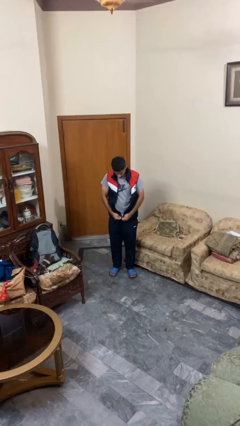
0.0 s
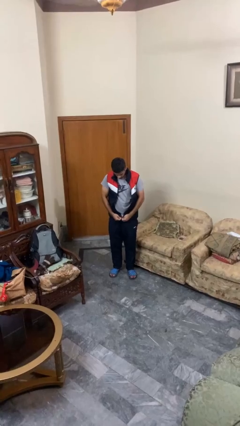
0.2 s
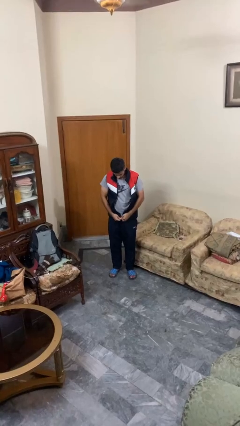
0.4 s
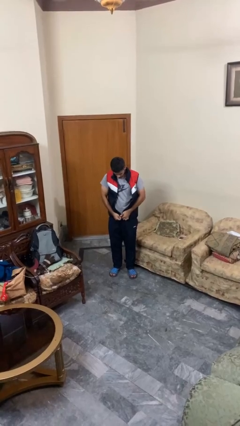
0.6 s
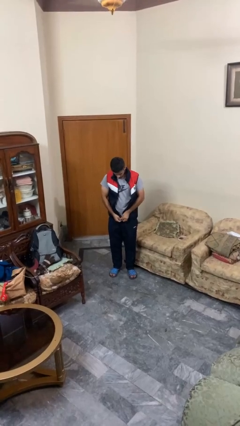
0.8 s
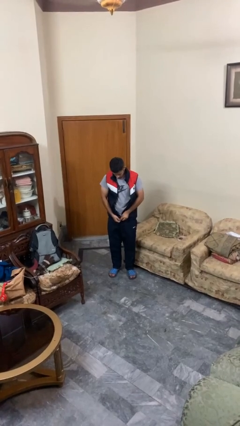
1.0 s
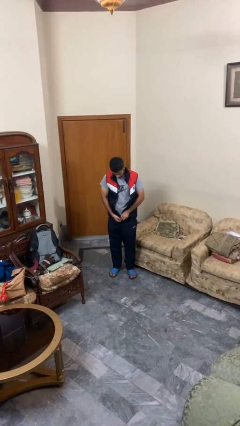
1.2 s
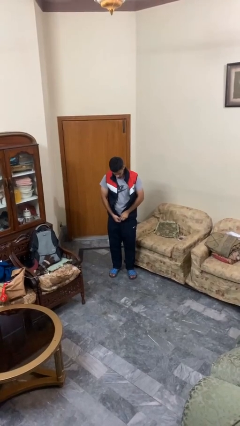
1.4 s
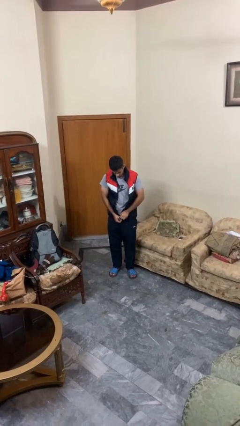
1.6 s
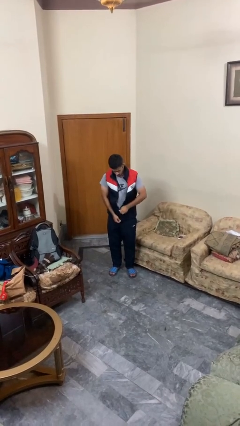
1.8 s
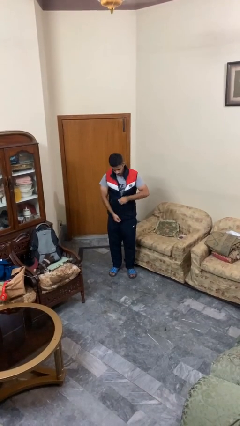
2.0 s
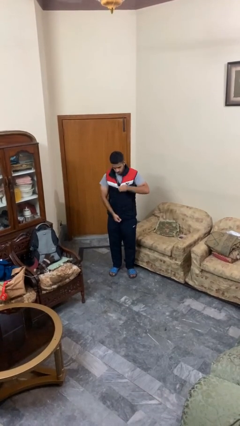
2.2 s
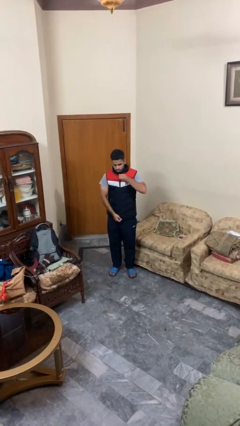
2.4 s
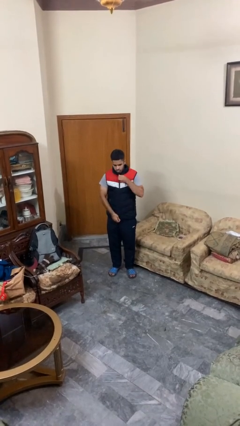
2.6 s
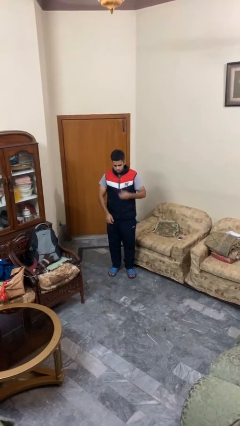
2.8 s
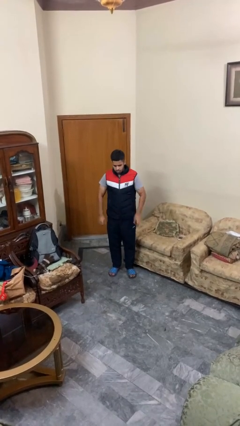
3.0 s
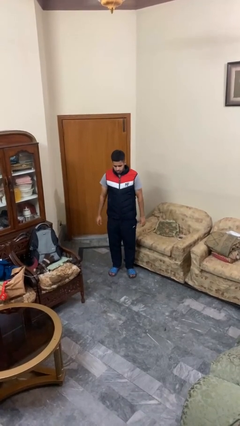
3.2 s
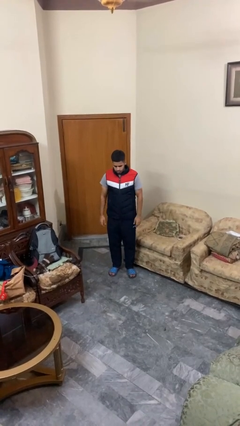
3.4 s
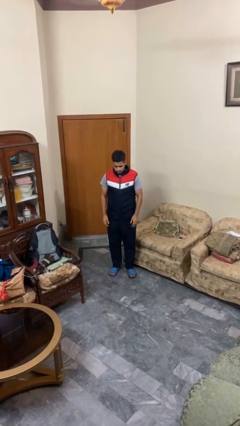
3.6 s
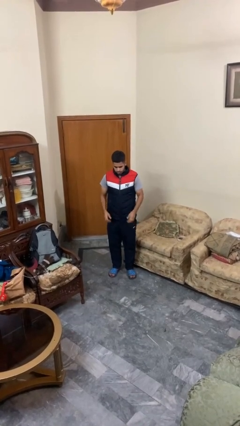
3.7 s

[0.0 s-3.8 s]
person zips up jacket

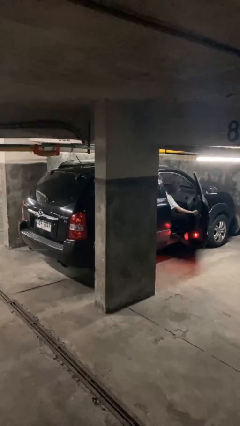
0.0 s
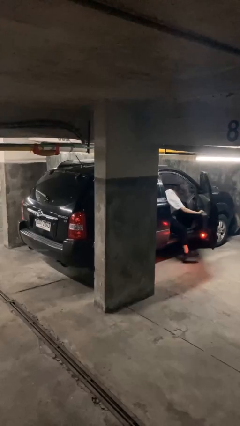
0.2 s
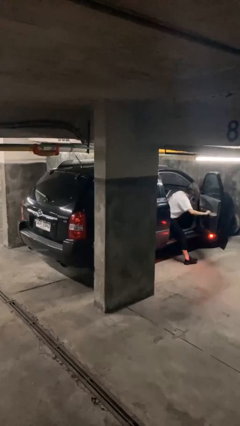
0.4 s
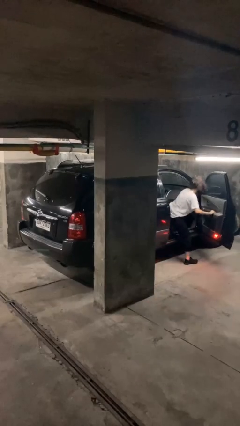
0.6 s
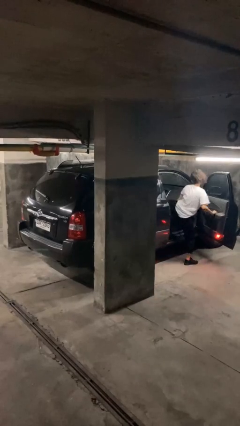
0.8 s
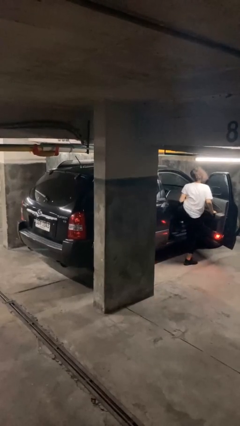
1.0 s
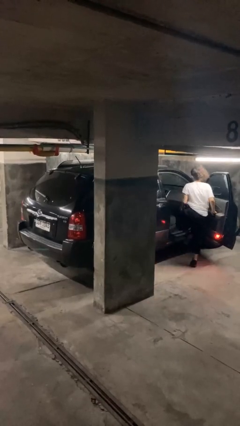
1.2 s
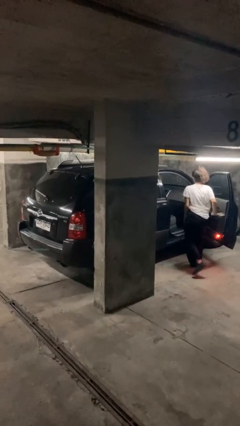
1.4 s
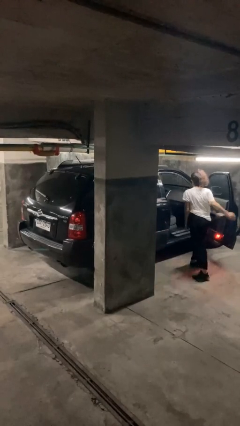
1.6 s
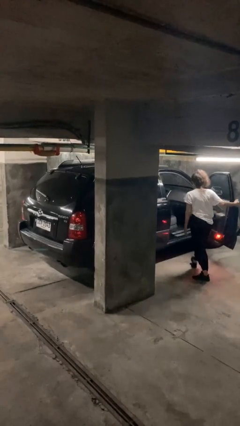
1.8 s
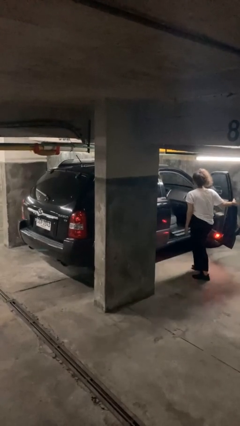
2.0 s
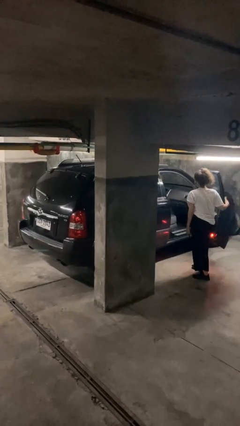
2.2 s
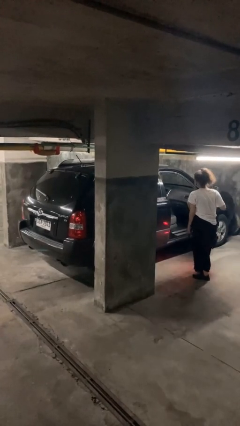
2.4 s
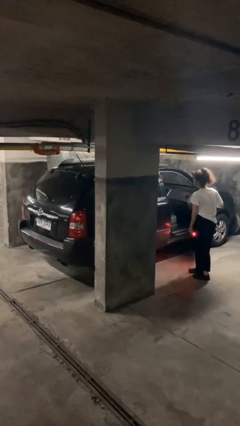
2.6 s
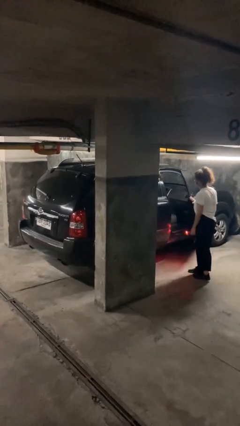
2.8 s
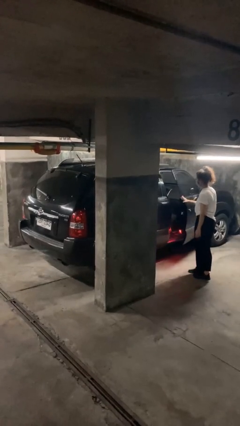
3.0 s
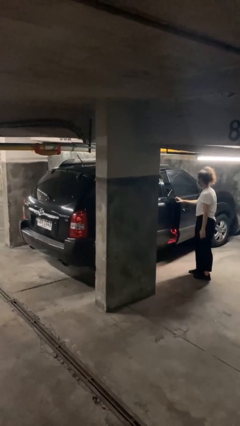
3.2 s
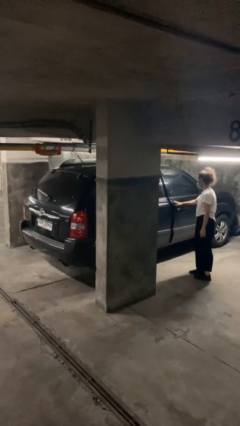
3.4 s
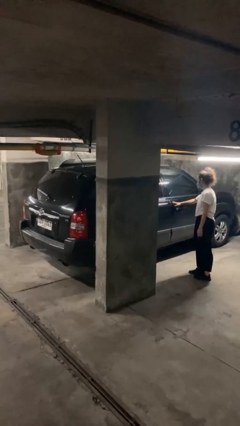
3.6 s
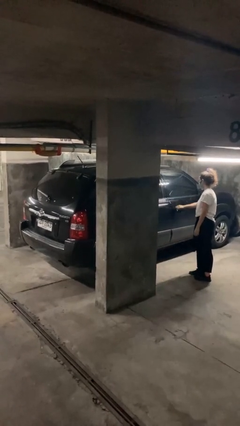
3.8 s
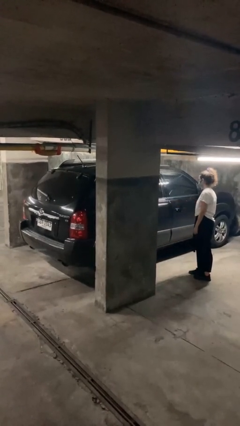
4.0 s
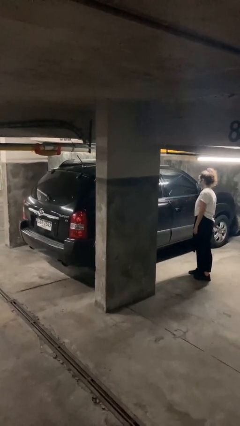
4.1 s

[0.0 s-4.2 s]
car drops off person

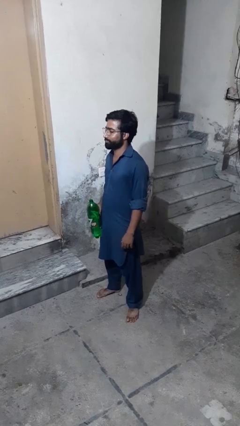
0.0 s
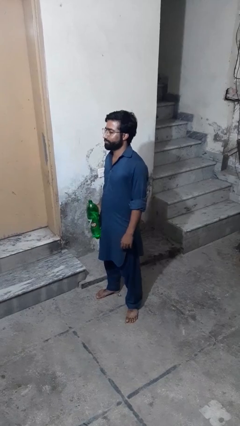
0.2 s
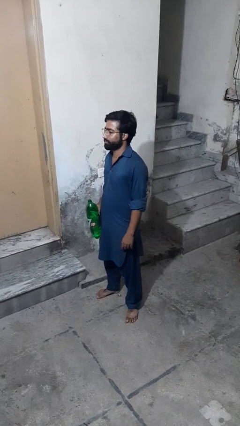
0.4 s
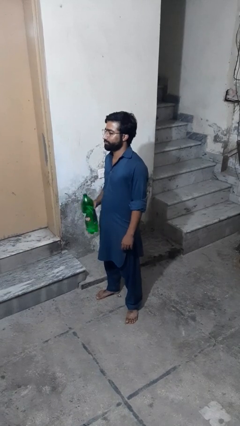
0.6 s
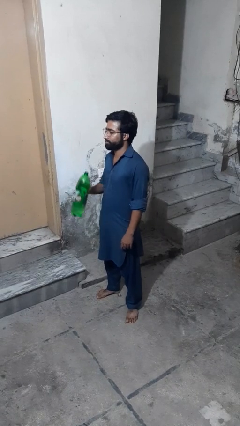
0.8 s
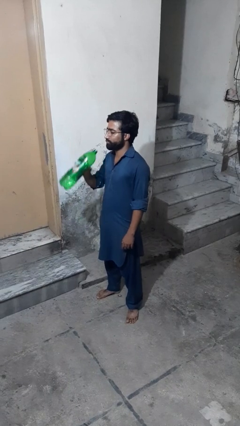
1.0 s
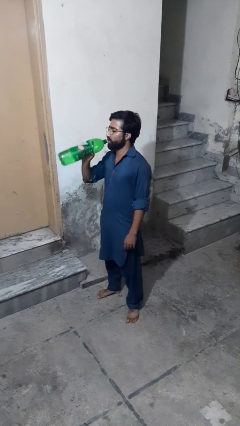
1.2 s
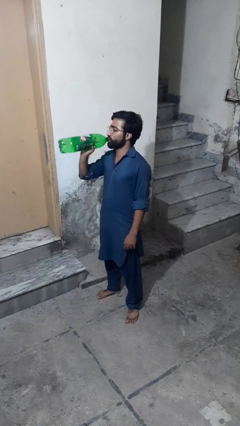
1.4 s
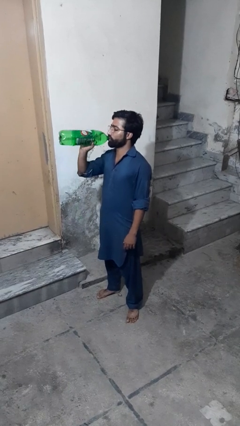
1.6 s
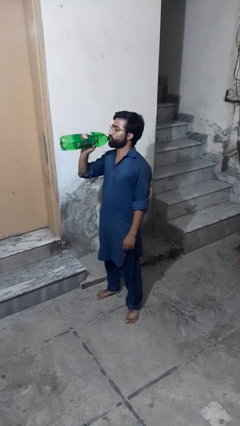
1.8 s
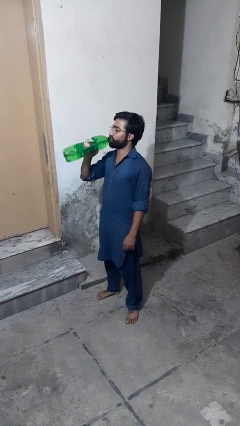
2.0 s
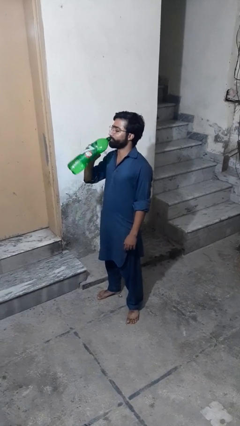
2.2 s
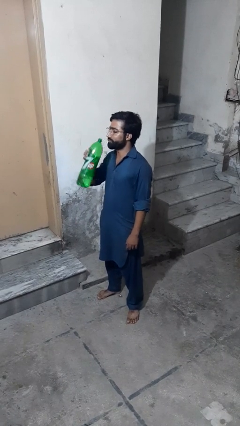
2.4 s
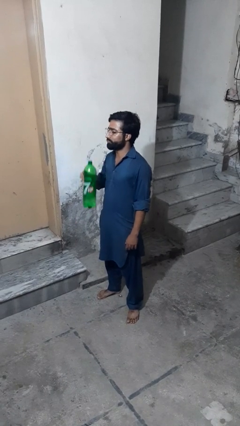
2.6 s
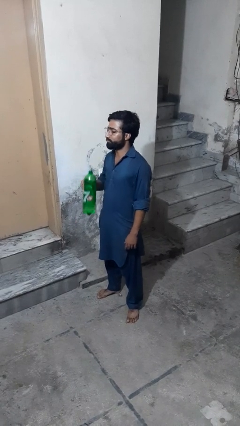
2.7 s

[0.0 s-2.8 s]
person drinks from bottle

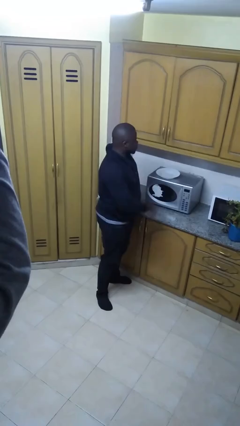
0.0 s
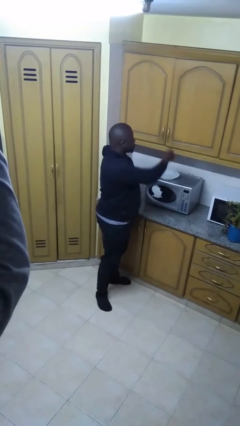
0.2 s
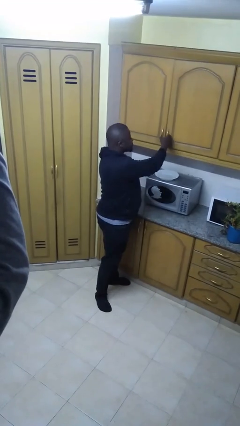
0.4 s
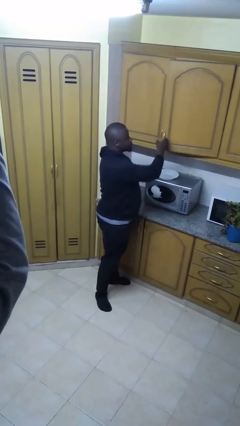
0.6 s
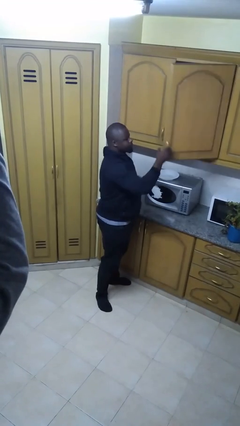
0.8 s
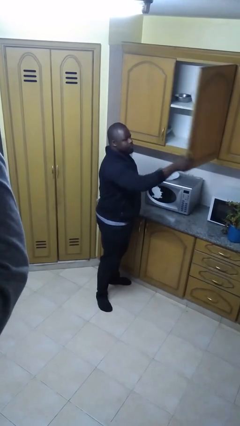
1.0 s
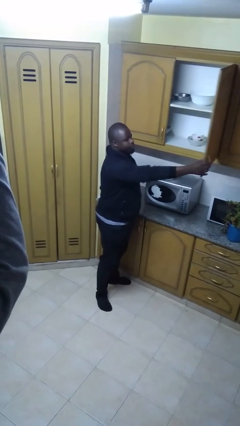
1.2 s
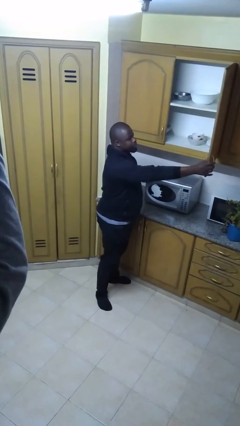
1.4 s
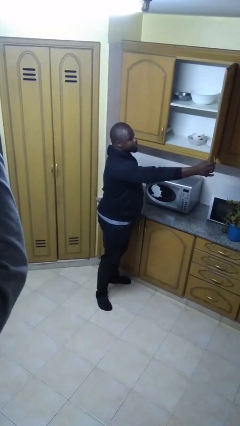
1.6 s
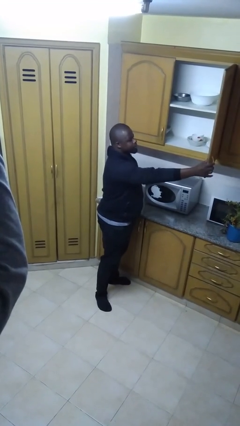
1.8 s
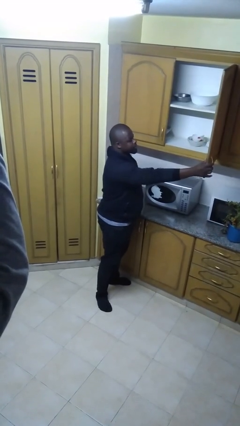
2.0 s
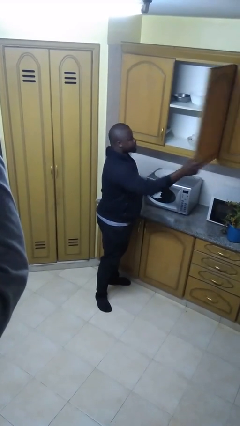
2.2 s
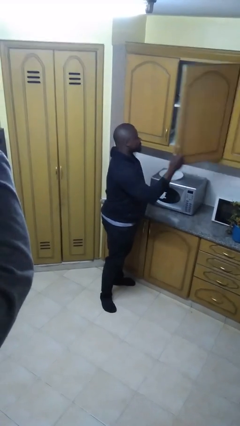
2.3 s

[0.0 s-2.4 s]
person opens cabinet

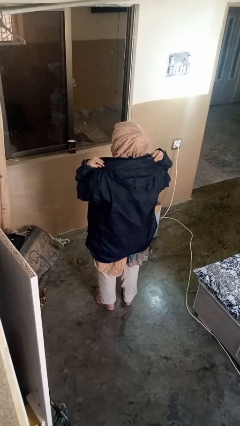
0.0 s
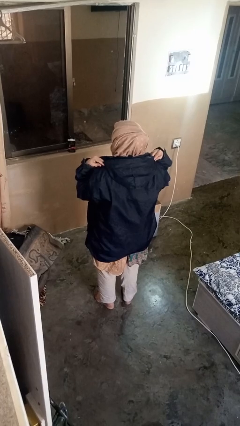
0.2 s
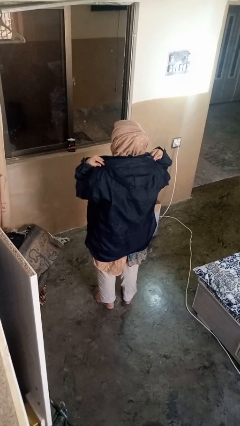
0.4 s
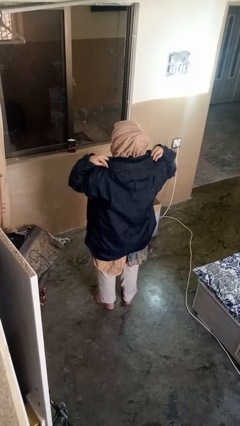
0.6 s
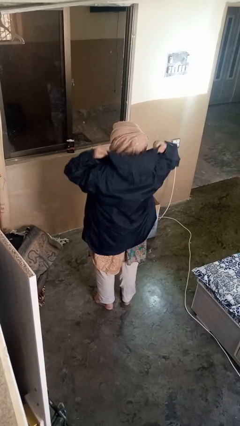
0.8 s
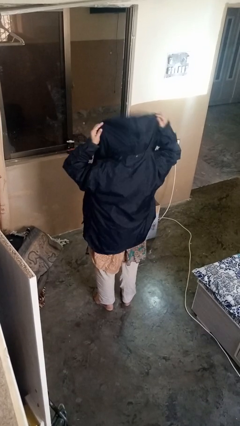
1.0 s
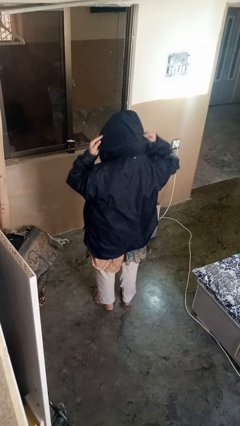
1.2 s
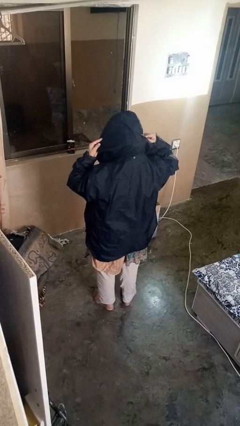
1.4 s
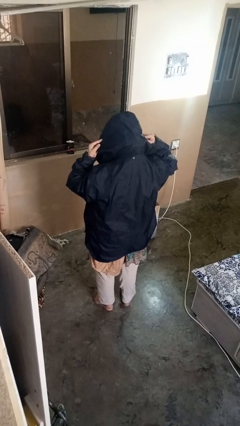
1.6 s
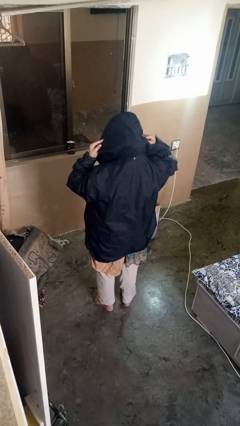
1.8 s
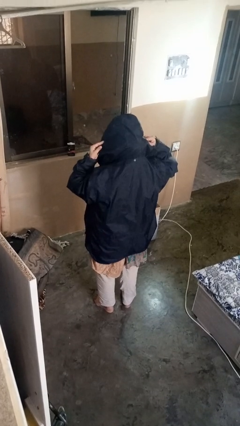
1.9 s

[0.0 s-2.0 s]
person puts on hat

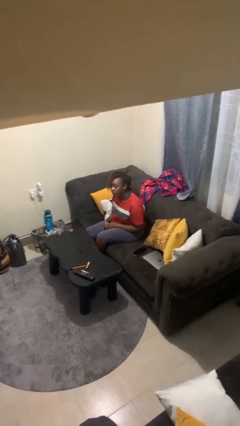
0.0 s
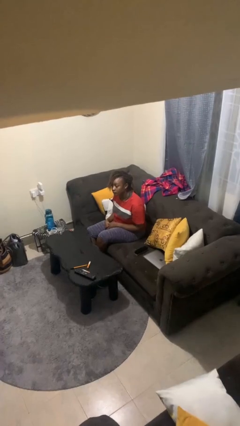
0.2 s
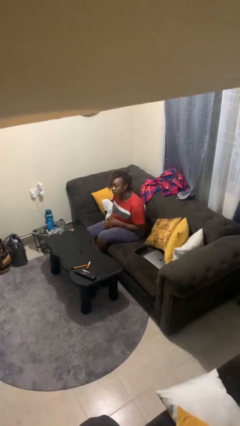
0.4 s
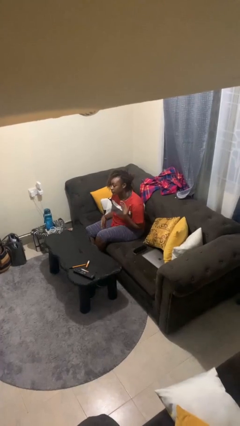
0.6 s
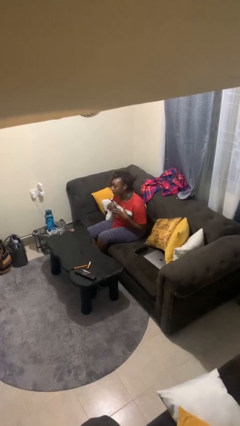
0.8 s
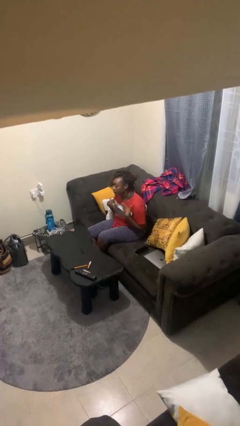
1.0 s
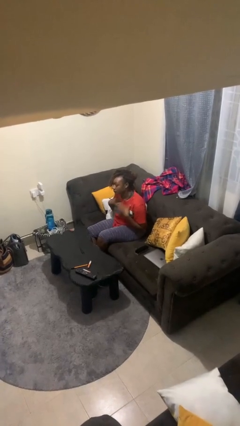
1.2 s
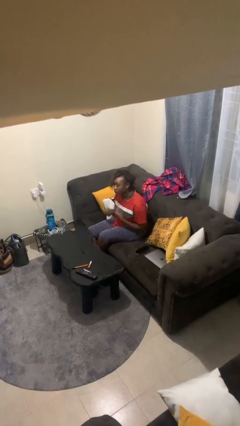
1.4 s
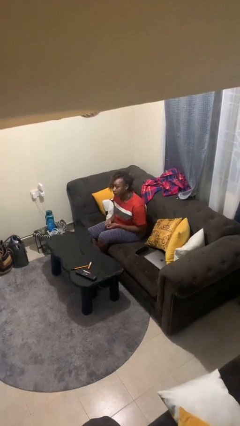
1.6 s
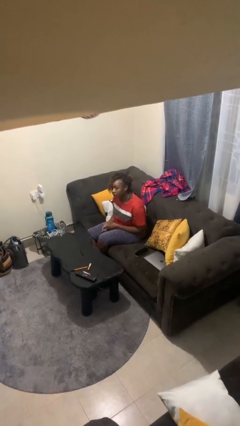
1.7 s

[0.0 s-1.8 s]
person drums on chest

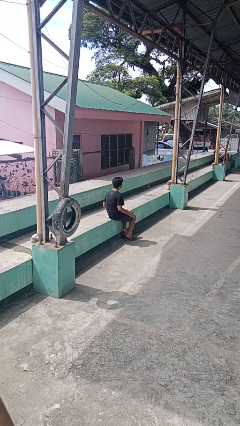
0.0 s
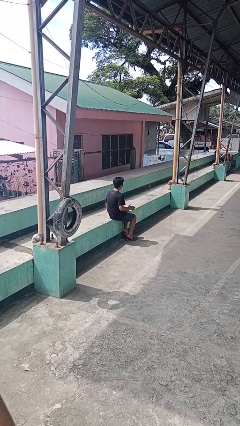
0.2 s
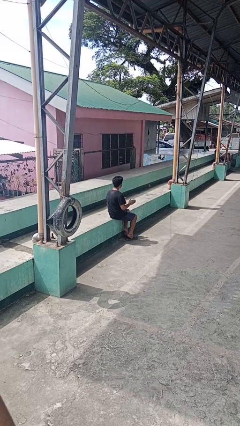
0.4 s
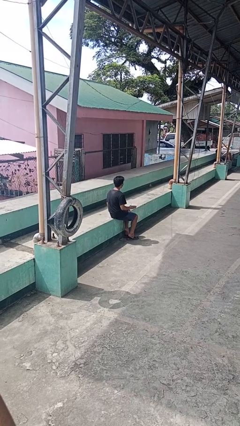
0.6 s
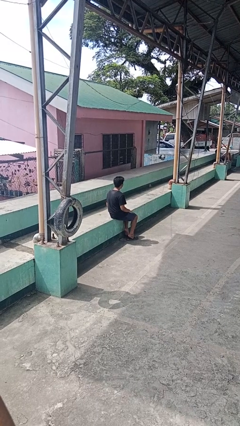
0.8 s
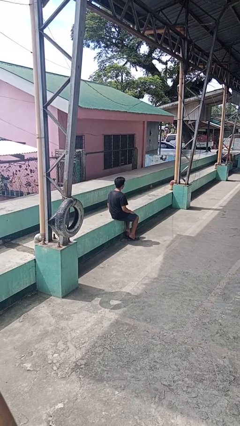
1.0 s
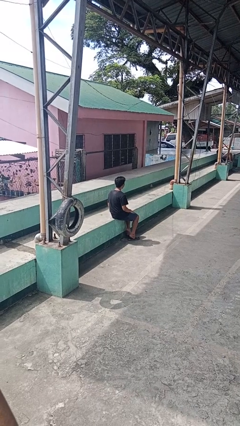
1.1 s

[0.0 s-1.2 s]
person slaps hands on thighs
